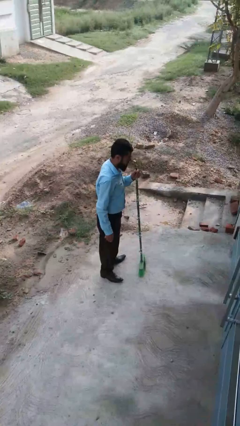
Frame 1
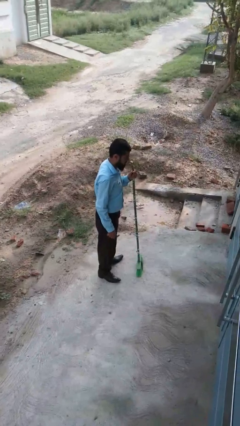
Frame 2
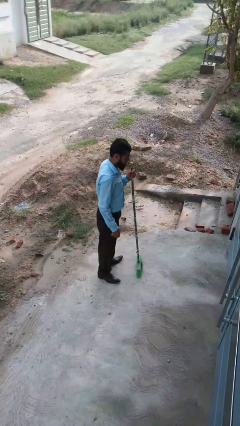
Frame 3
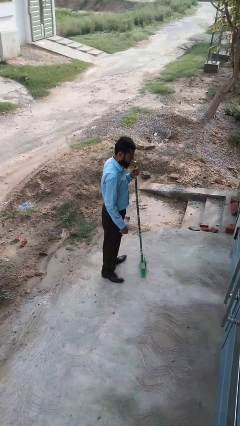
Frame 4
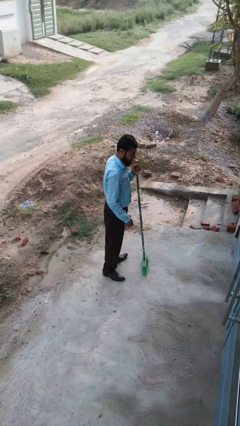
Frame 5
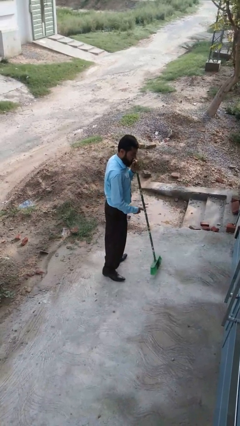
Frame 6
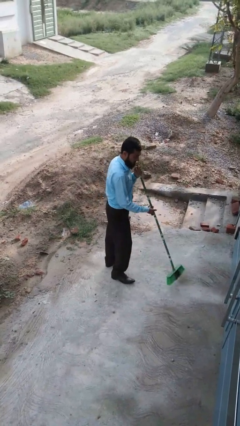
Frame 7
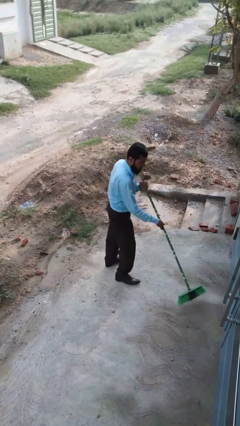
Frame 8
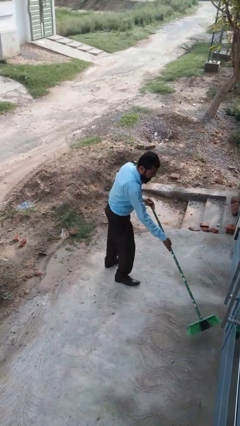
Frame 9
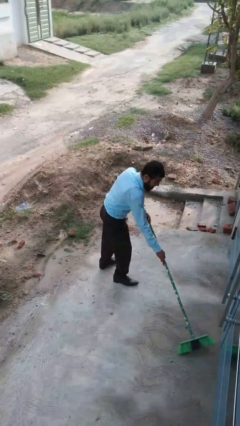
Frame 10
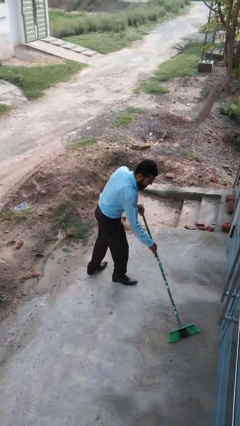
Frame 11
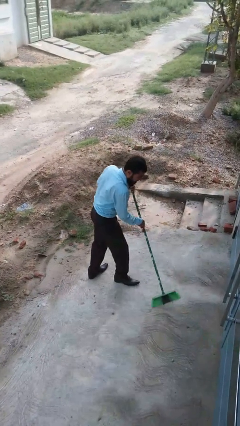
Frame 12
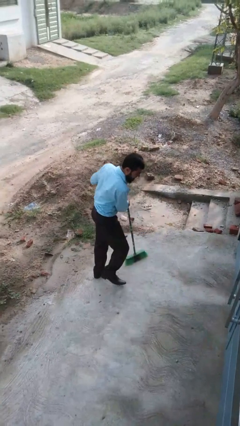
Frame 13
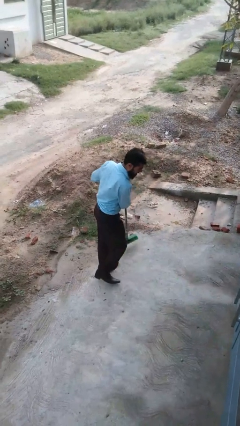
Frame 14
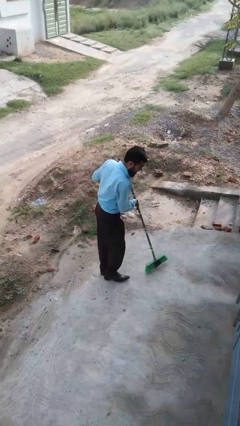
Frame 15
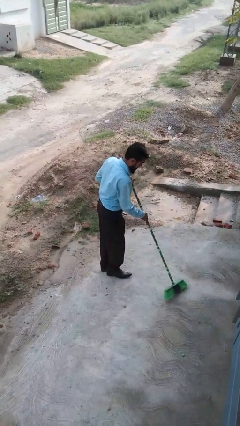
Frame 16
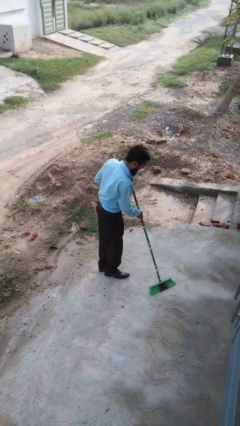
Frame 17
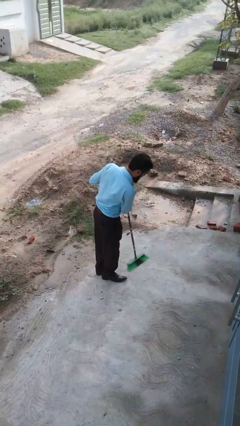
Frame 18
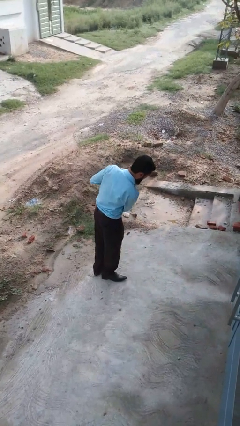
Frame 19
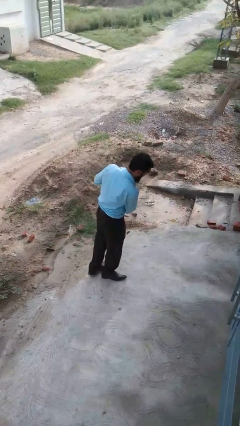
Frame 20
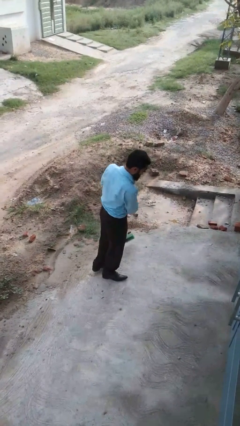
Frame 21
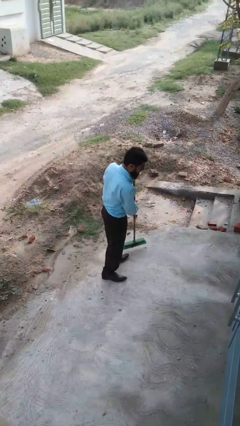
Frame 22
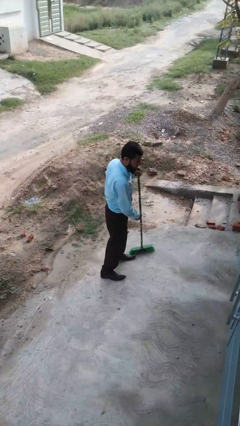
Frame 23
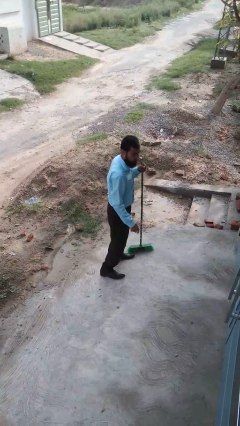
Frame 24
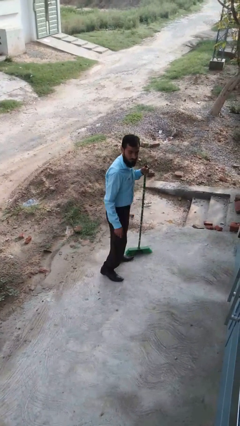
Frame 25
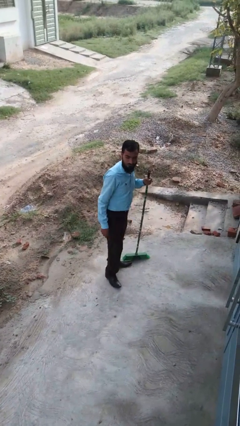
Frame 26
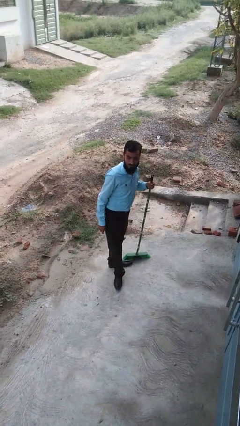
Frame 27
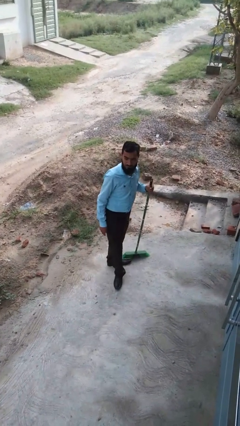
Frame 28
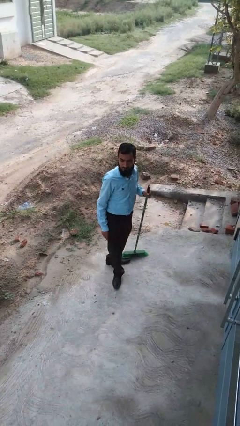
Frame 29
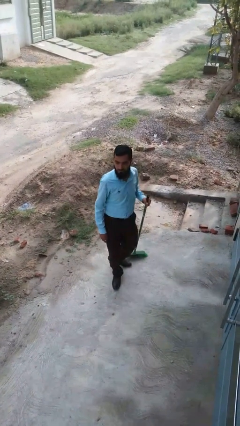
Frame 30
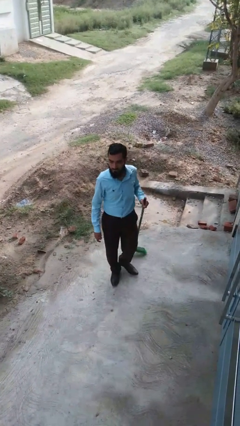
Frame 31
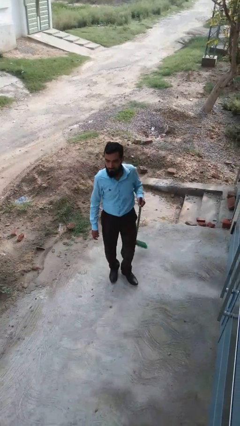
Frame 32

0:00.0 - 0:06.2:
person sweeps floor

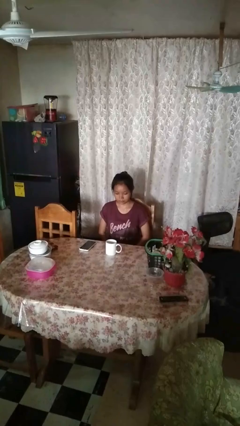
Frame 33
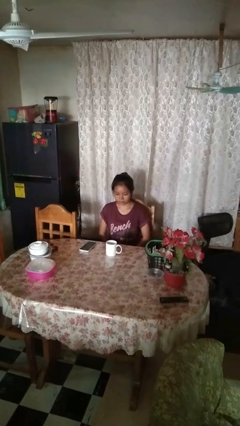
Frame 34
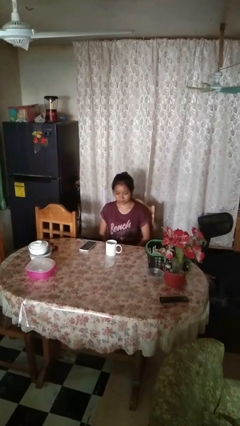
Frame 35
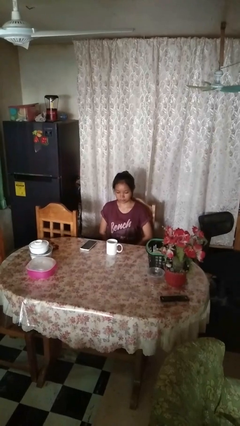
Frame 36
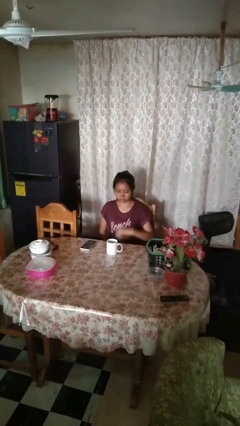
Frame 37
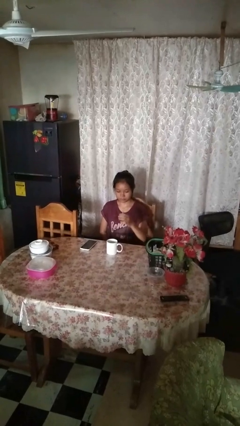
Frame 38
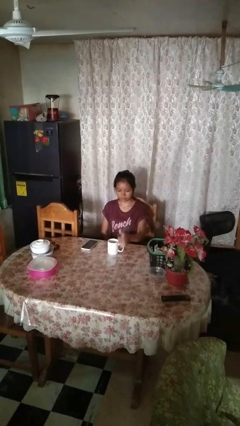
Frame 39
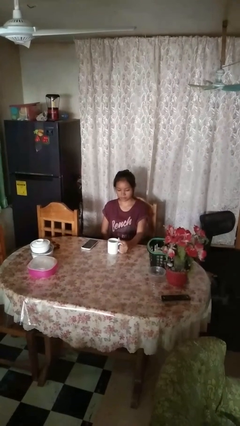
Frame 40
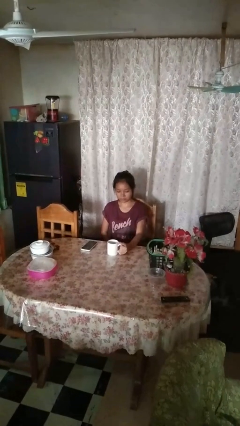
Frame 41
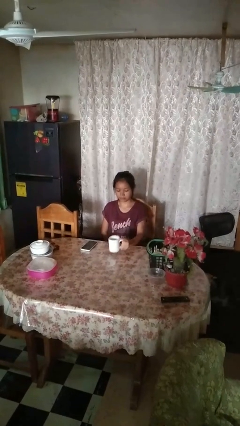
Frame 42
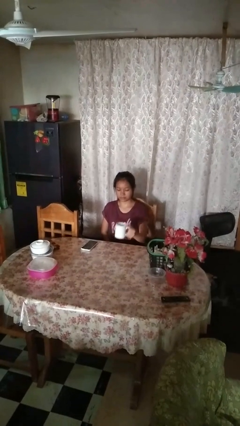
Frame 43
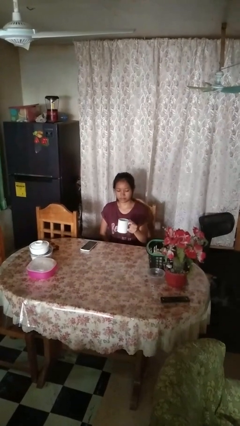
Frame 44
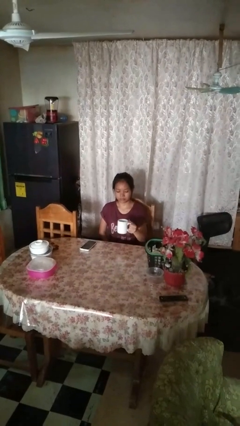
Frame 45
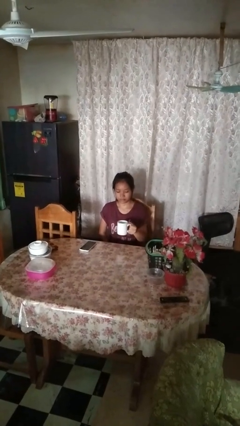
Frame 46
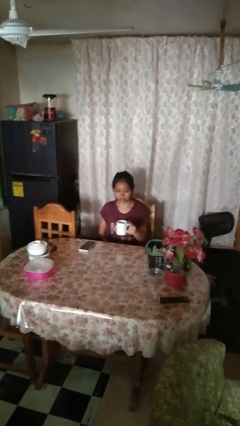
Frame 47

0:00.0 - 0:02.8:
person picks up object from table

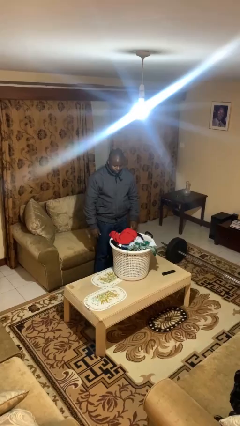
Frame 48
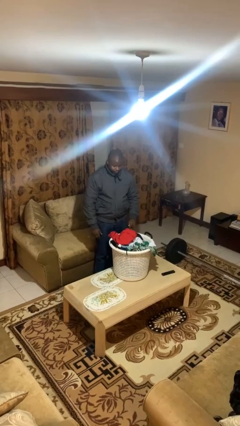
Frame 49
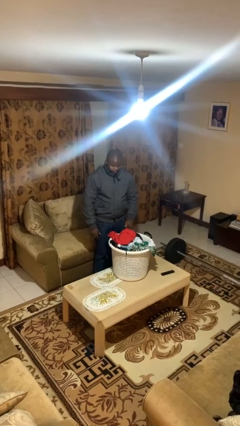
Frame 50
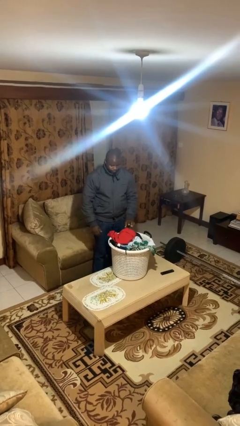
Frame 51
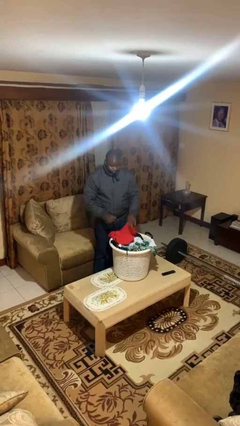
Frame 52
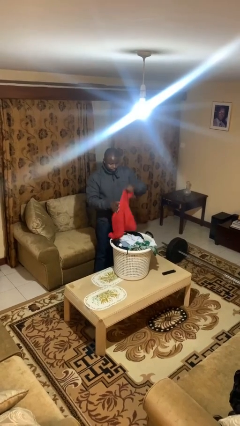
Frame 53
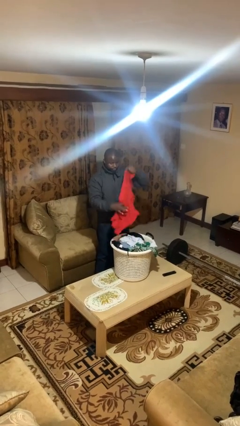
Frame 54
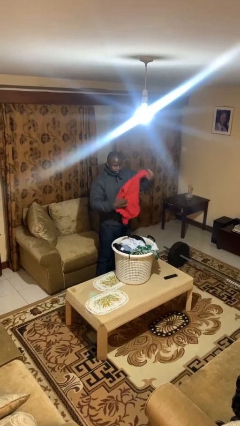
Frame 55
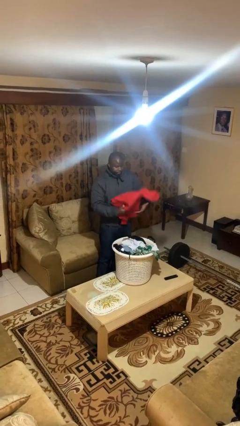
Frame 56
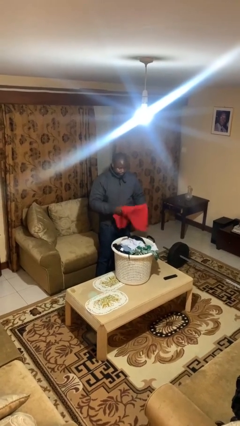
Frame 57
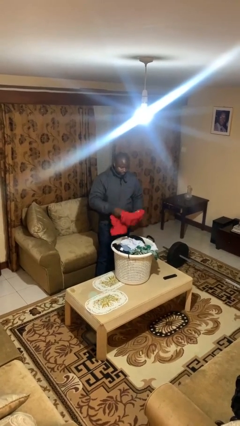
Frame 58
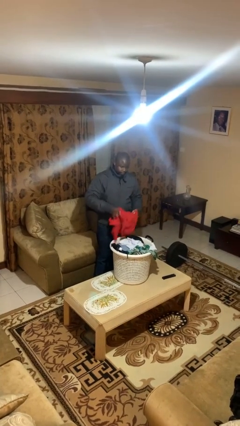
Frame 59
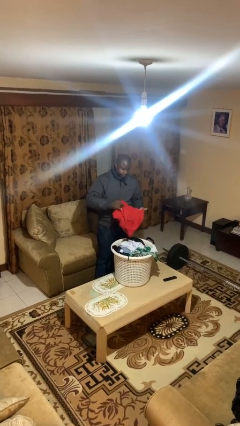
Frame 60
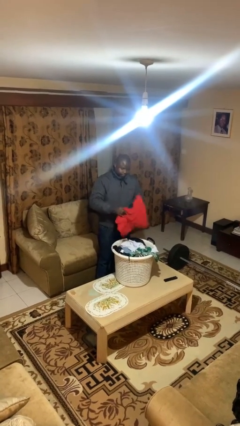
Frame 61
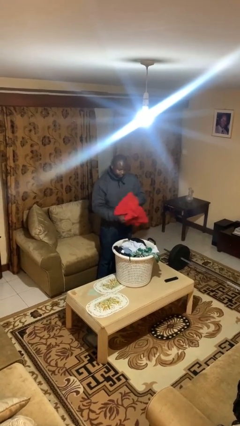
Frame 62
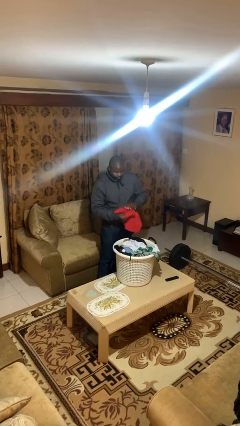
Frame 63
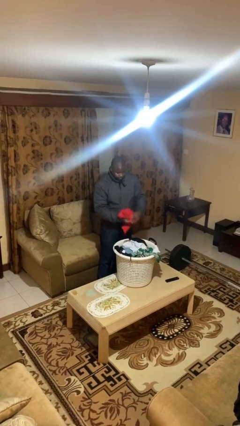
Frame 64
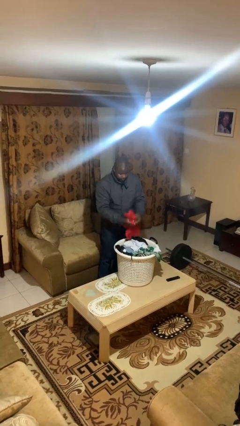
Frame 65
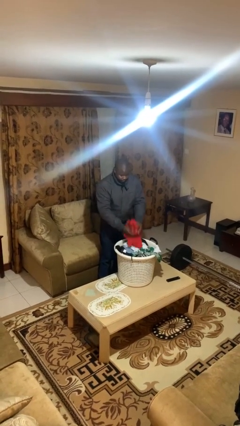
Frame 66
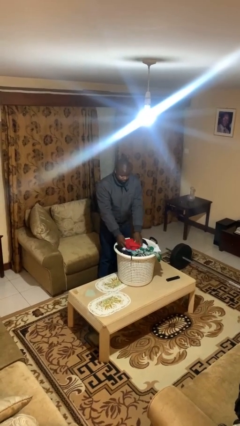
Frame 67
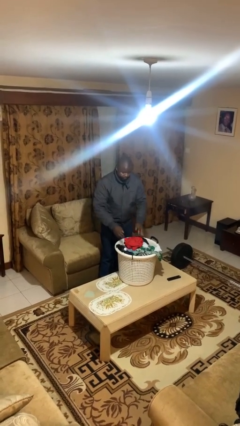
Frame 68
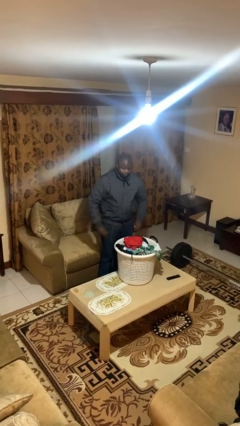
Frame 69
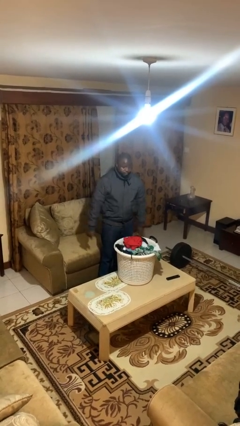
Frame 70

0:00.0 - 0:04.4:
person folds shirt

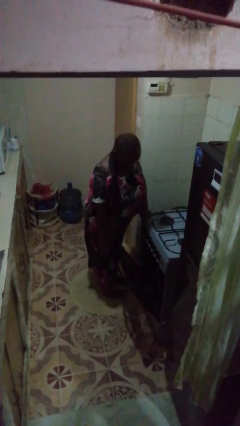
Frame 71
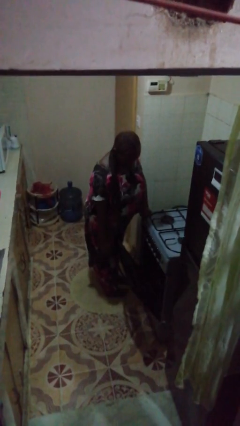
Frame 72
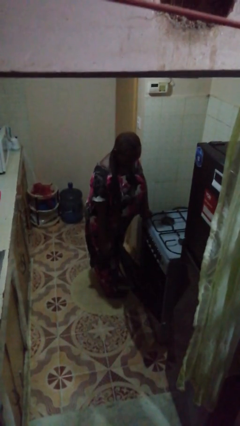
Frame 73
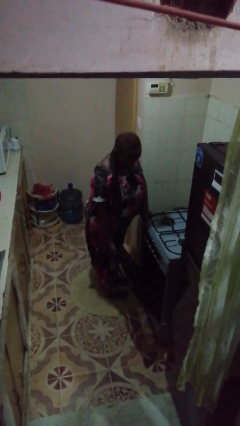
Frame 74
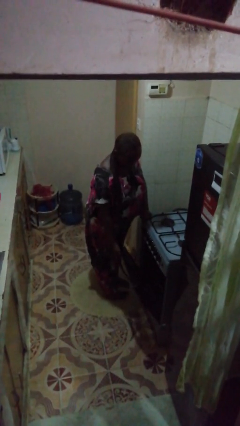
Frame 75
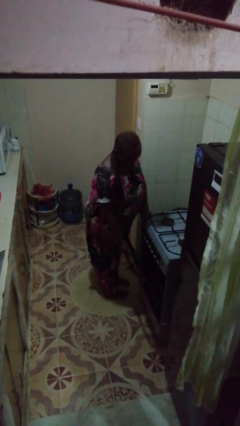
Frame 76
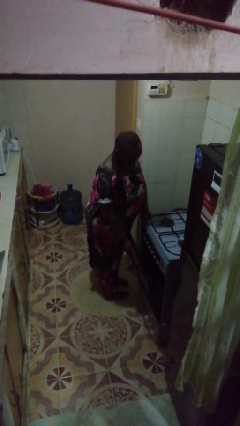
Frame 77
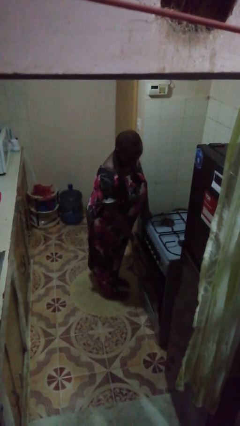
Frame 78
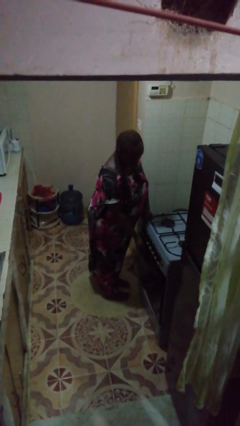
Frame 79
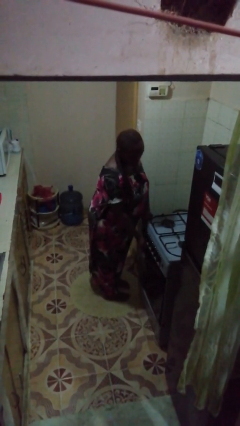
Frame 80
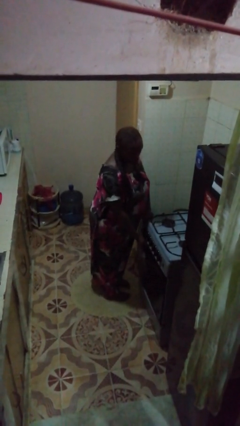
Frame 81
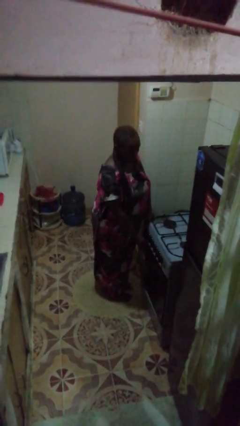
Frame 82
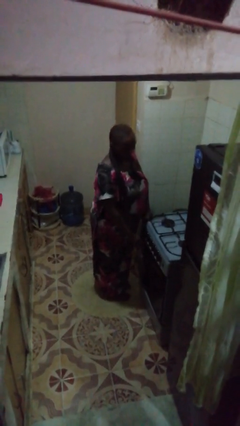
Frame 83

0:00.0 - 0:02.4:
person closes oven door

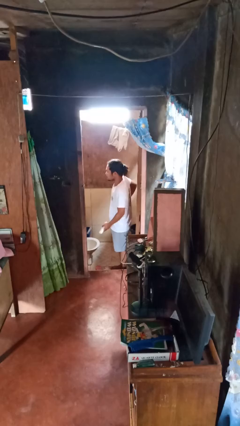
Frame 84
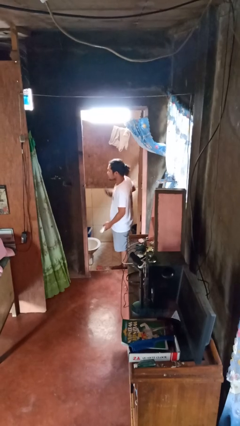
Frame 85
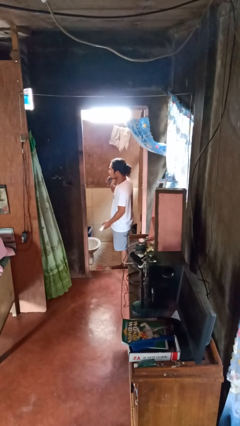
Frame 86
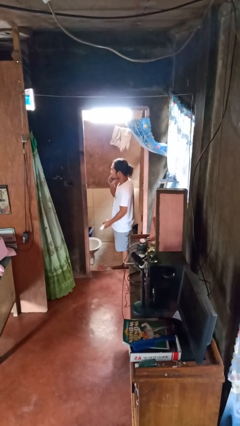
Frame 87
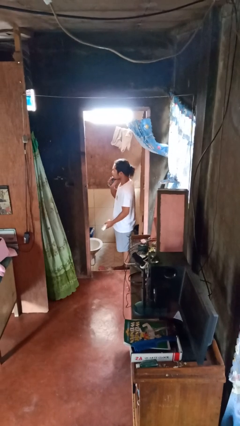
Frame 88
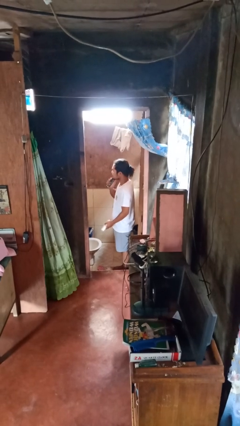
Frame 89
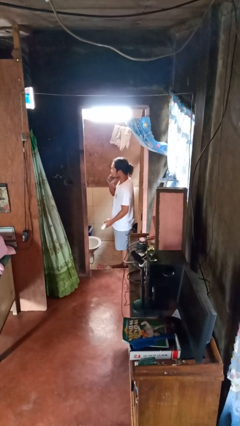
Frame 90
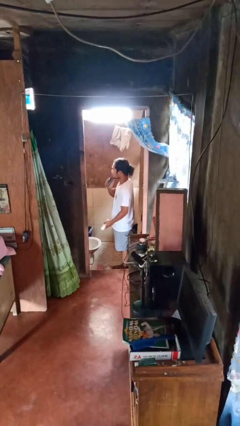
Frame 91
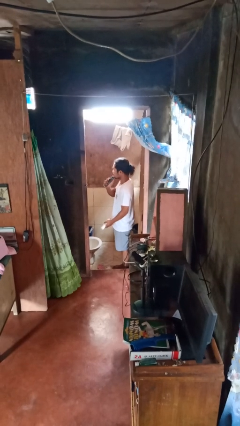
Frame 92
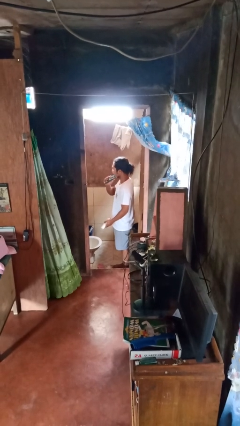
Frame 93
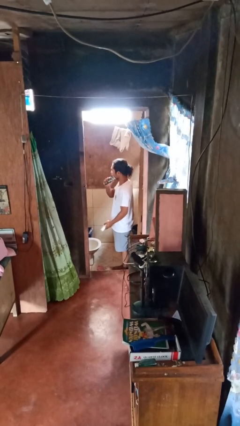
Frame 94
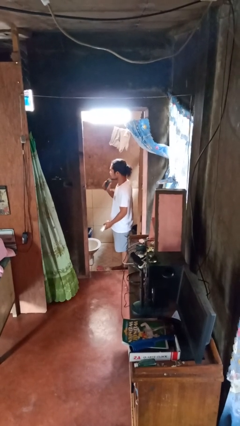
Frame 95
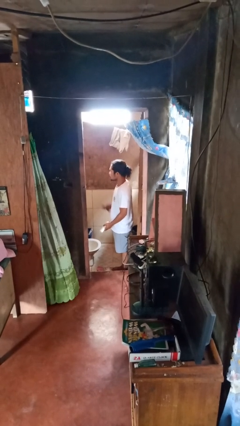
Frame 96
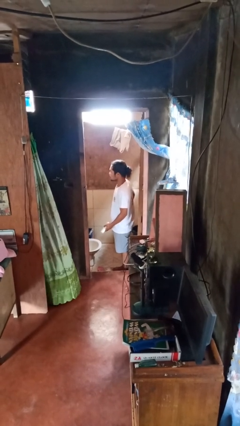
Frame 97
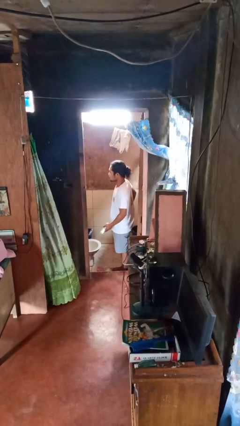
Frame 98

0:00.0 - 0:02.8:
person shaves face
